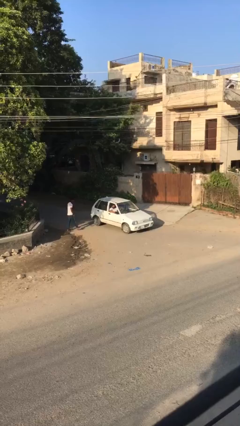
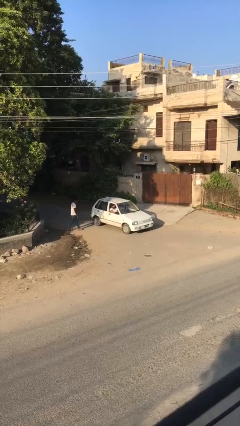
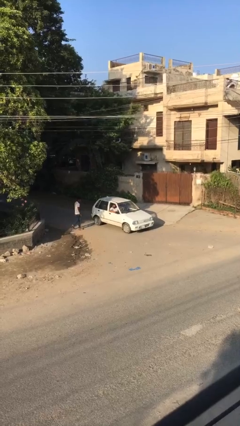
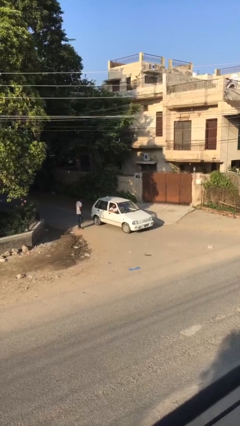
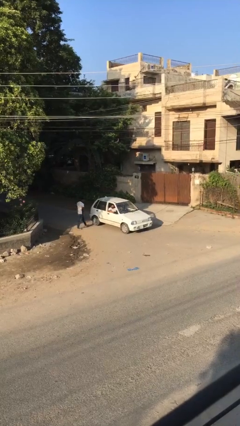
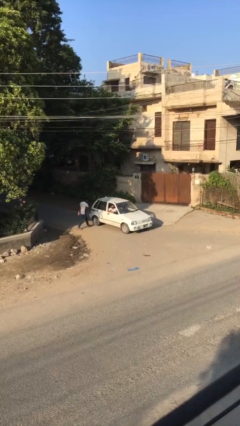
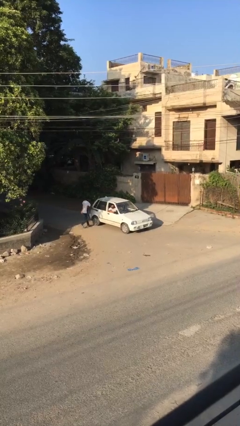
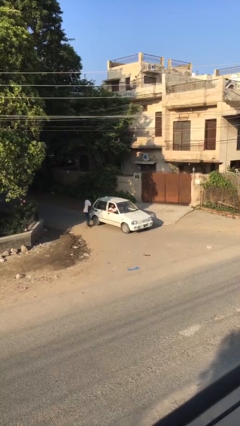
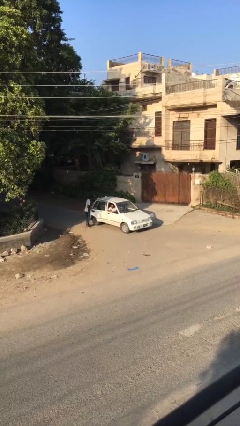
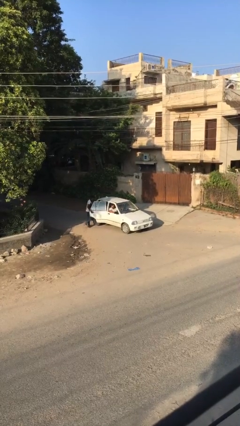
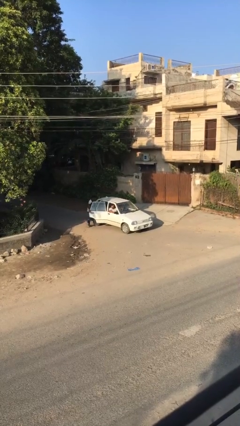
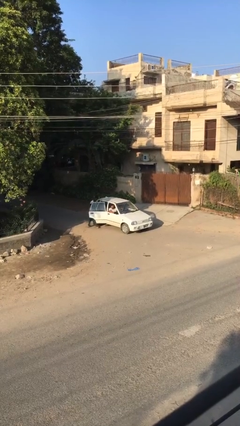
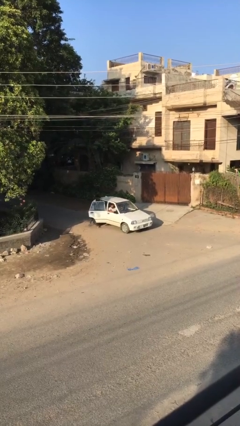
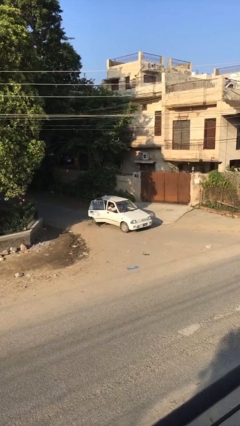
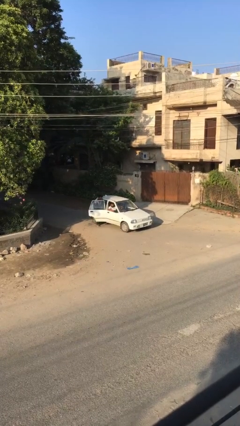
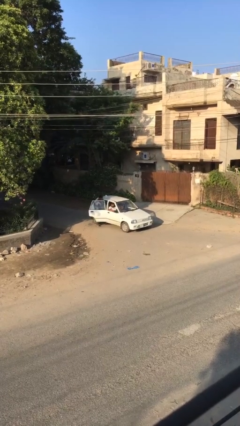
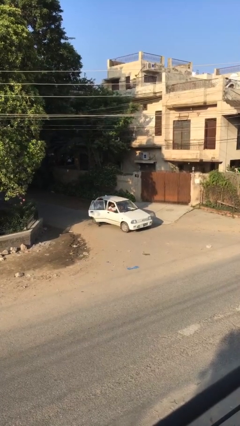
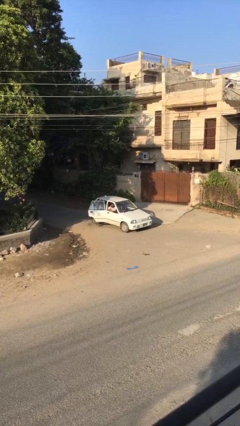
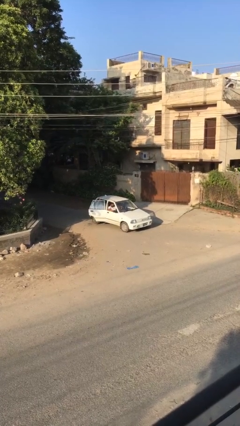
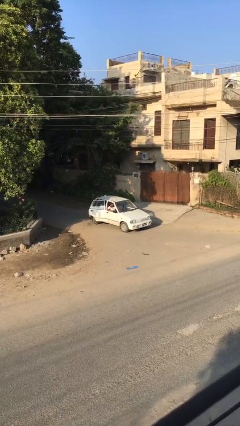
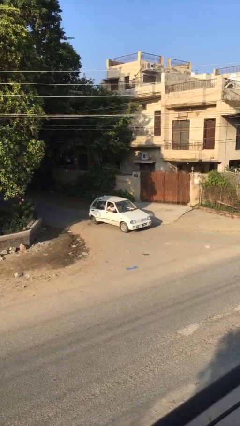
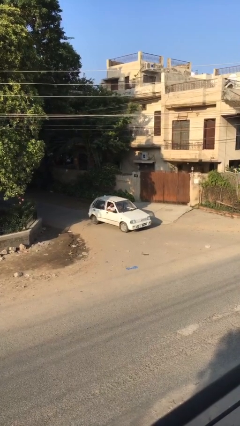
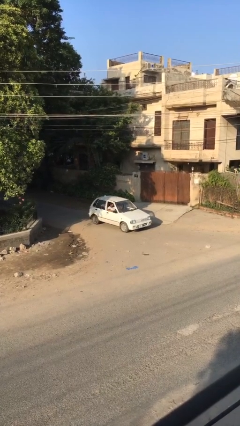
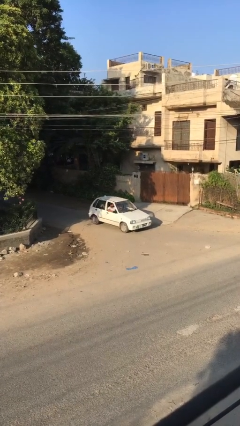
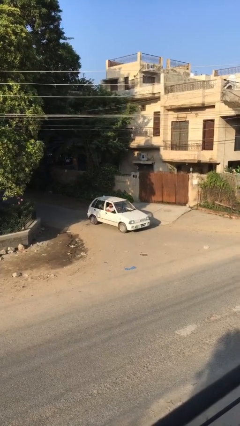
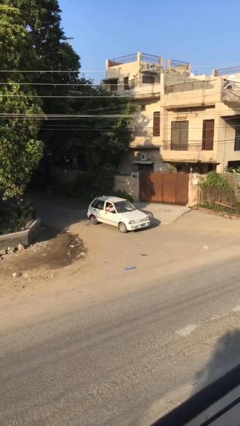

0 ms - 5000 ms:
car picks up person

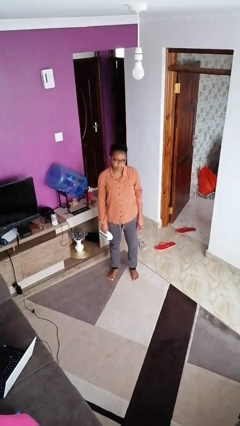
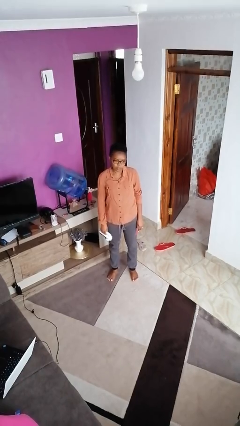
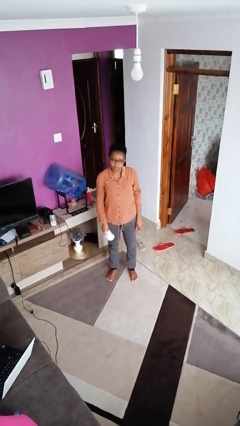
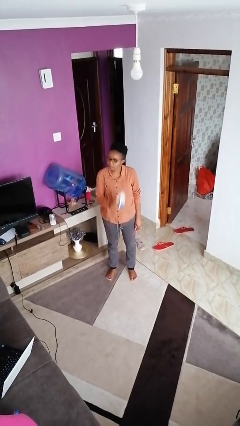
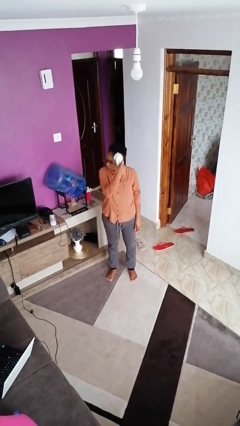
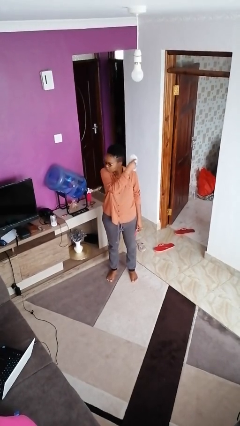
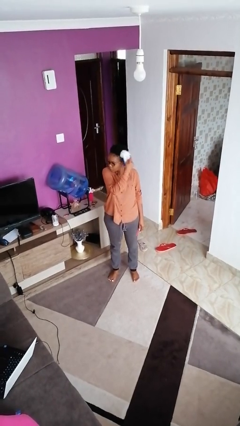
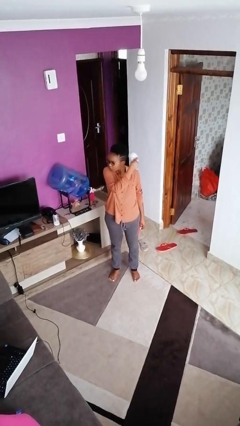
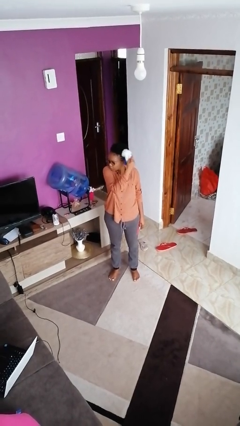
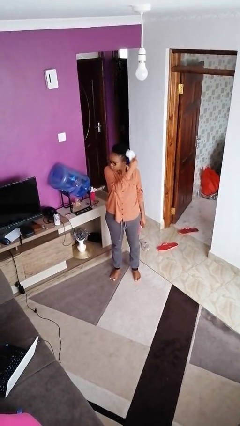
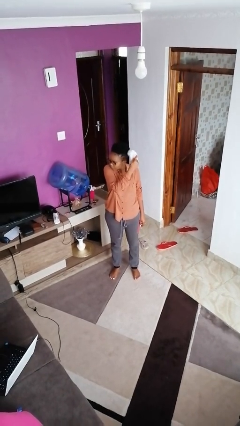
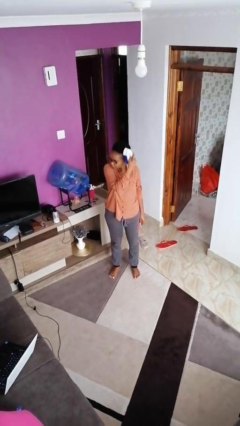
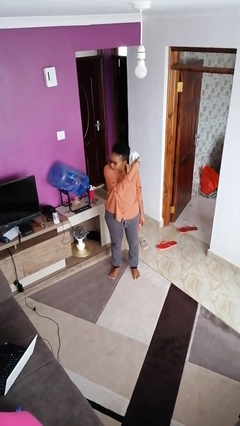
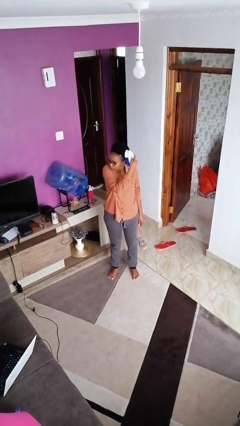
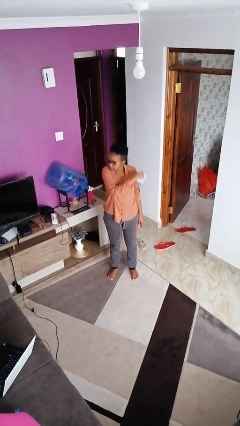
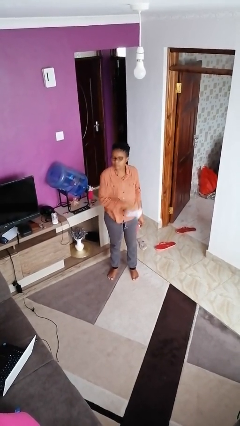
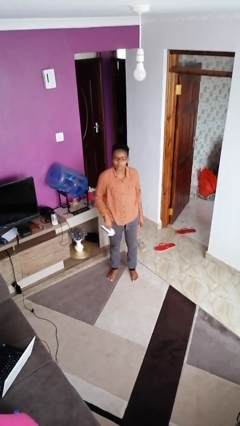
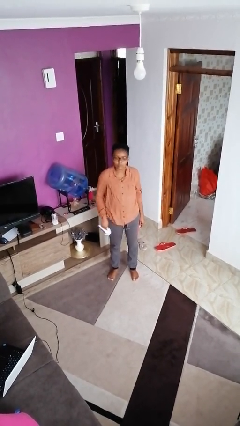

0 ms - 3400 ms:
person brushes hair

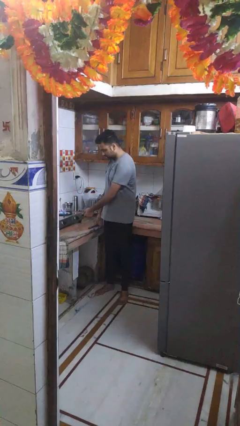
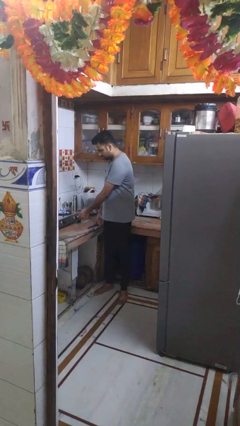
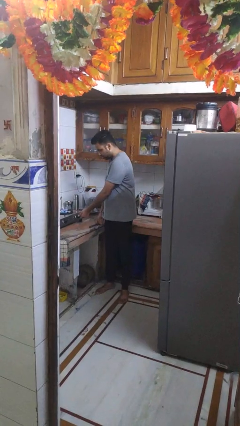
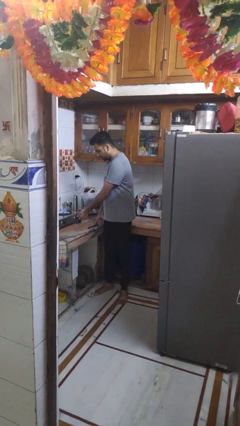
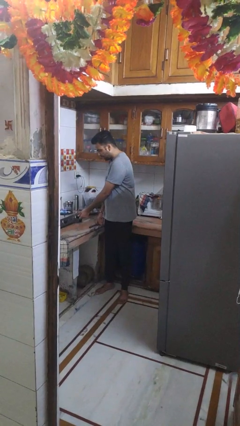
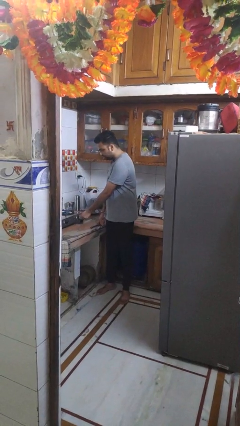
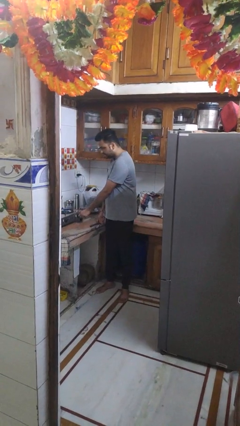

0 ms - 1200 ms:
person turns off stovetop

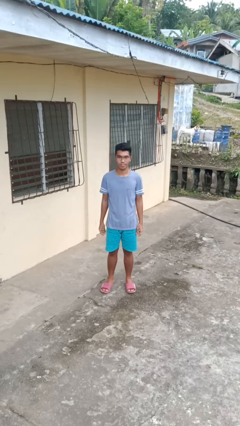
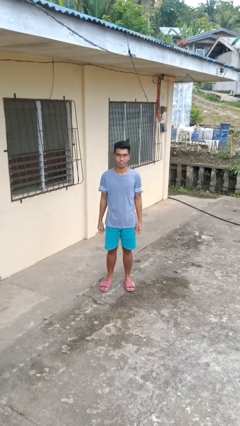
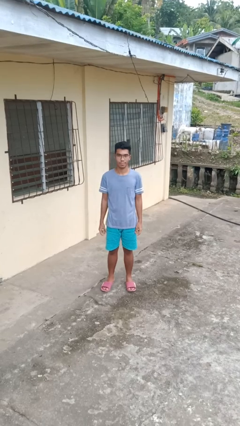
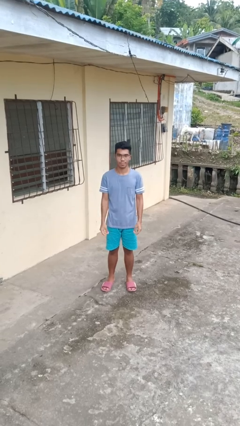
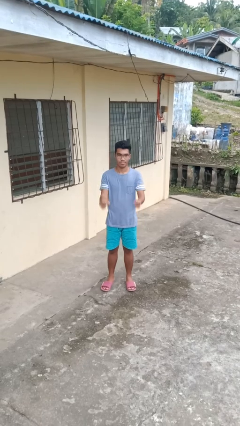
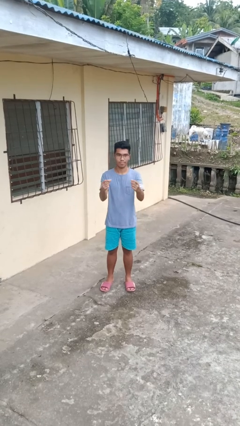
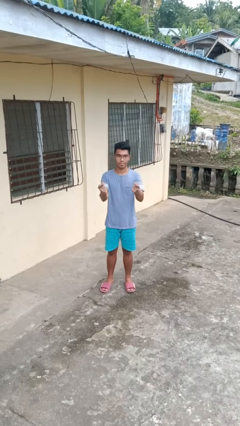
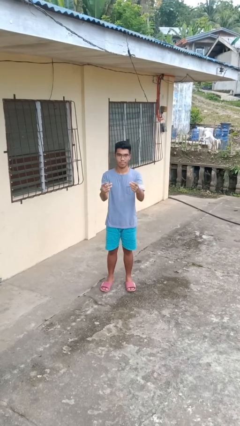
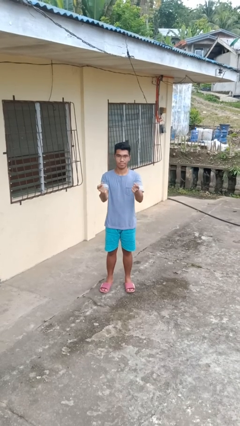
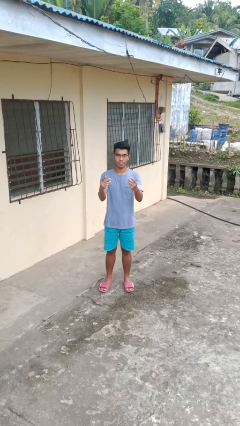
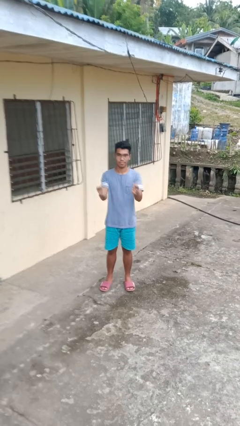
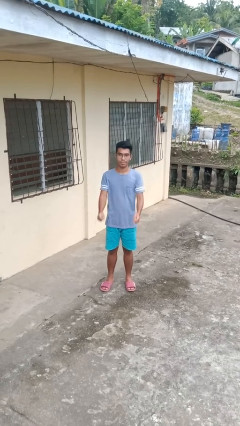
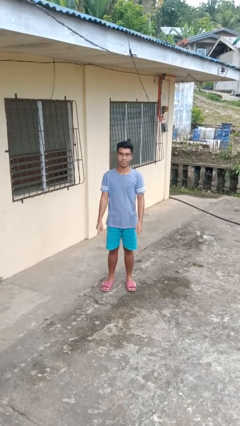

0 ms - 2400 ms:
person snaps fingers

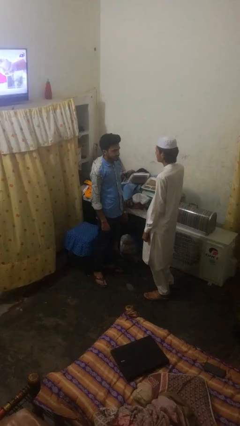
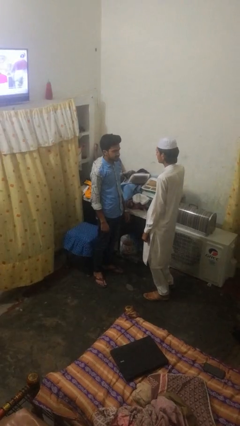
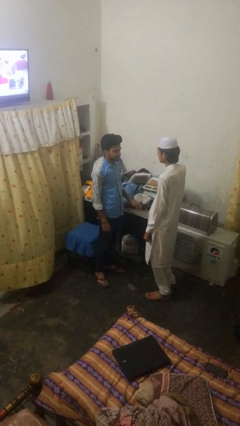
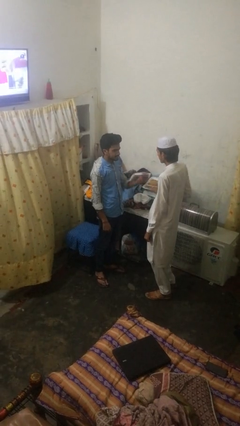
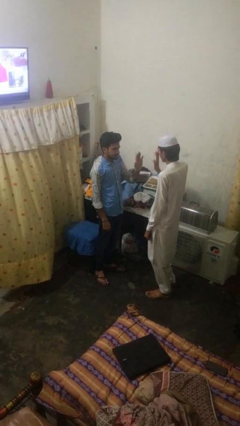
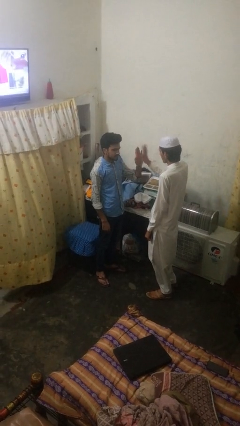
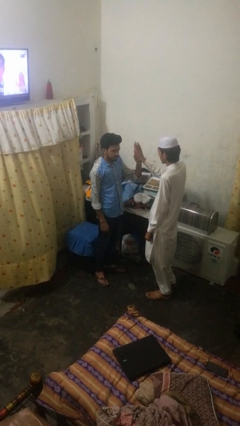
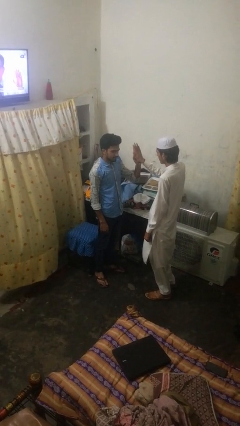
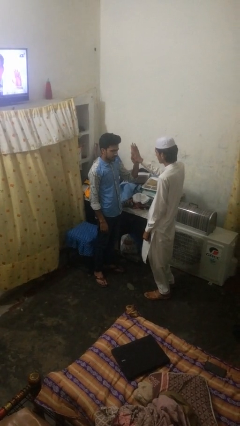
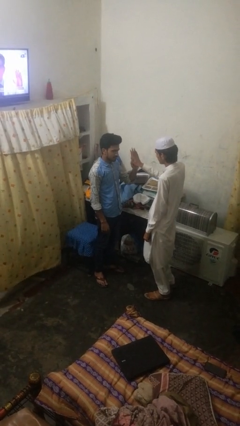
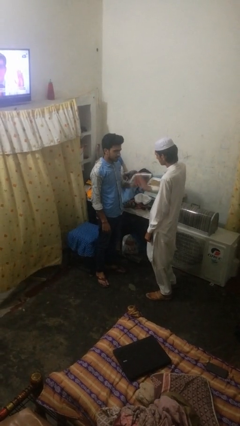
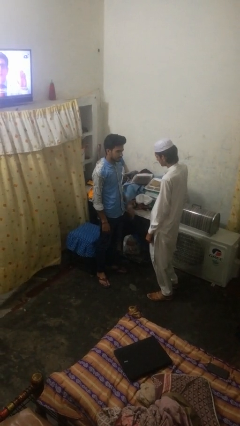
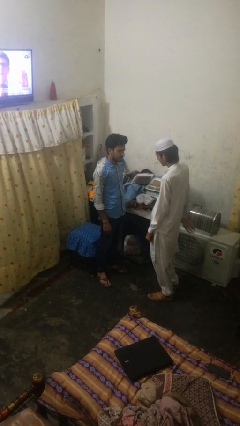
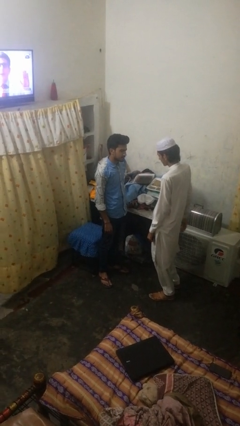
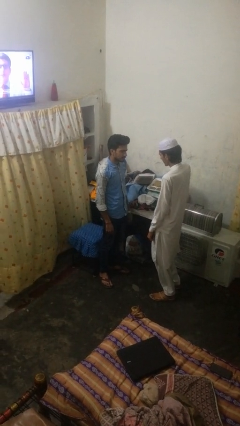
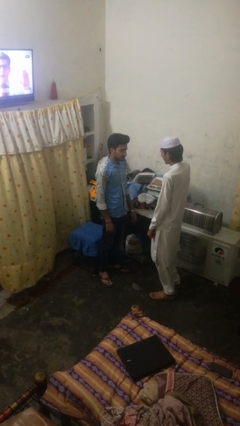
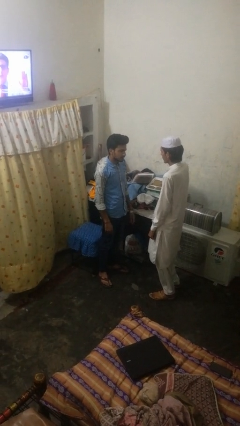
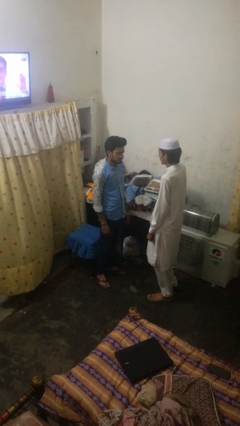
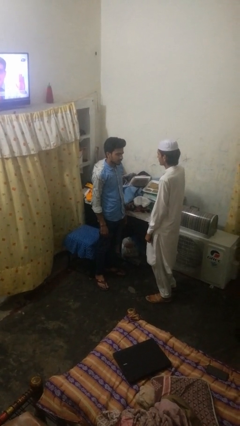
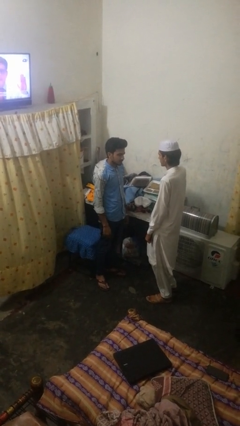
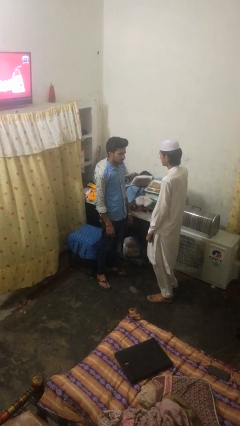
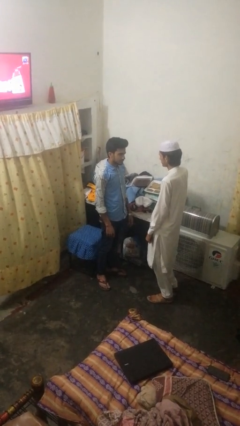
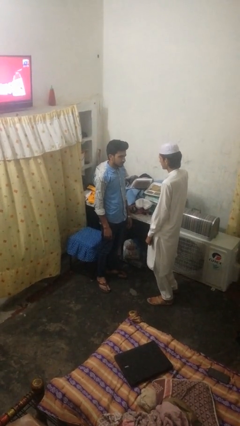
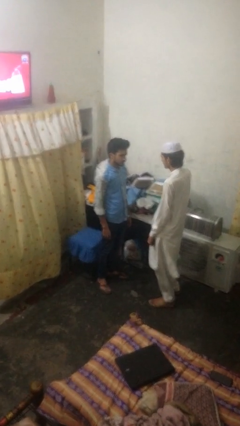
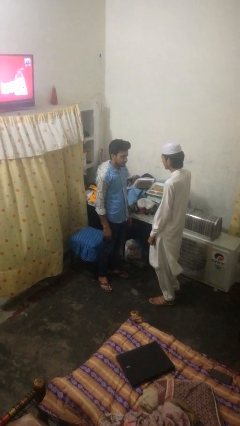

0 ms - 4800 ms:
person highfives hand

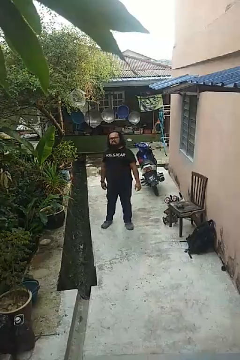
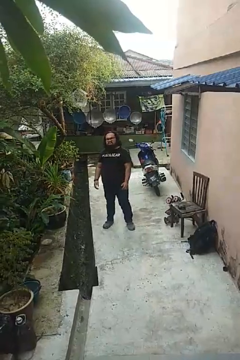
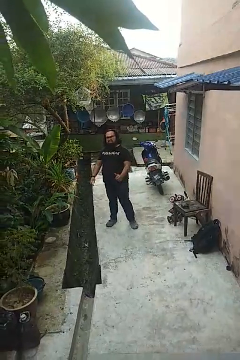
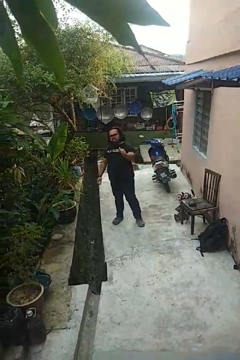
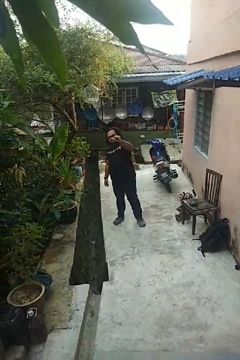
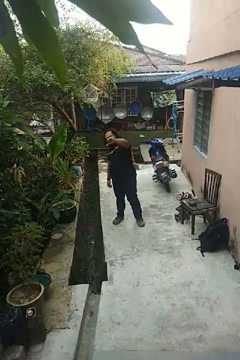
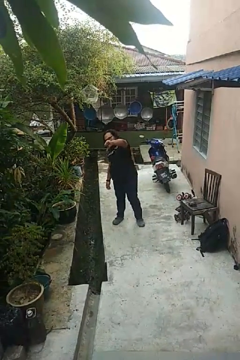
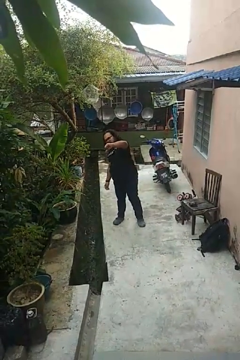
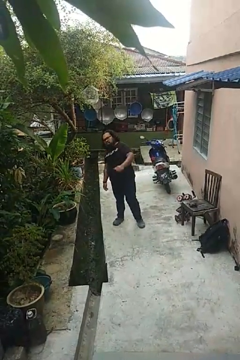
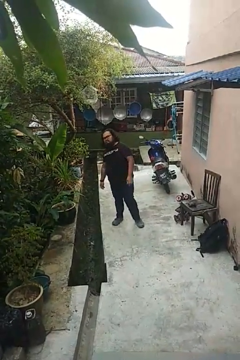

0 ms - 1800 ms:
person gestures thumbs down
